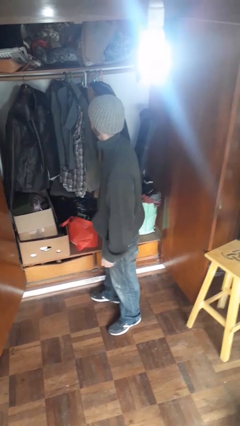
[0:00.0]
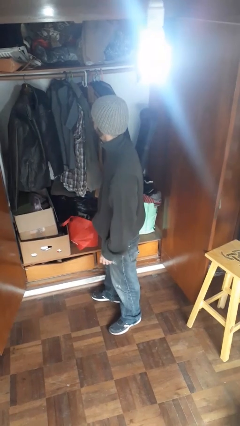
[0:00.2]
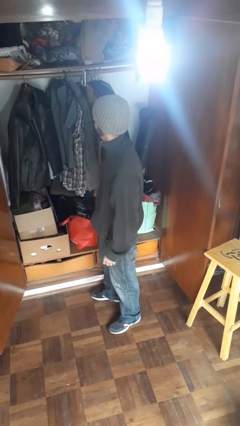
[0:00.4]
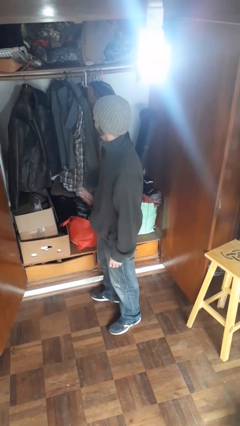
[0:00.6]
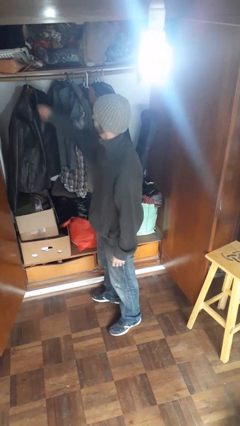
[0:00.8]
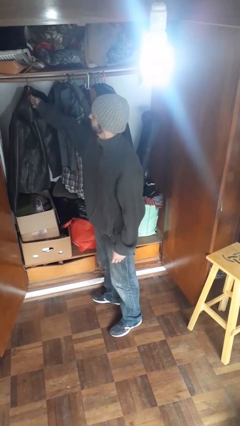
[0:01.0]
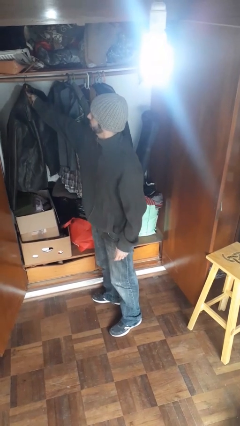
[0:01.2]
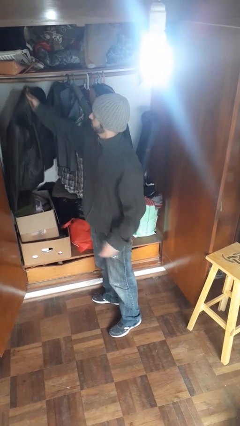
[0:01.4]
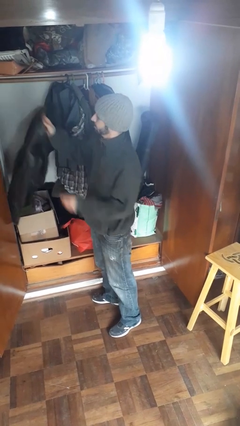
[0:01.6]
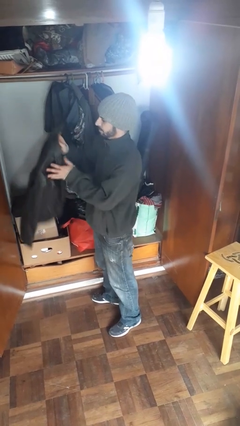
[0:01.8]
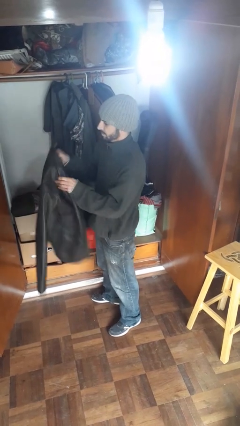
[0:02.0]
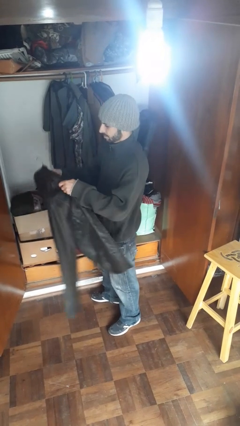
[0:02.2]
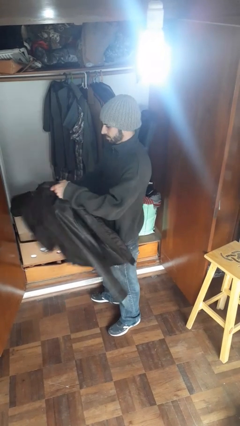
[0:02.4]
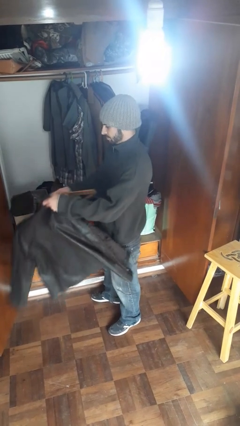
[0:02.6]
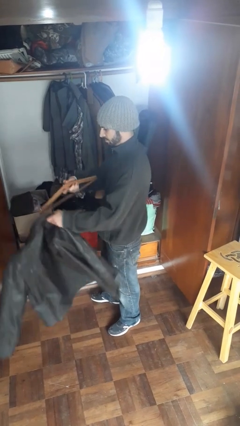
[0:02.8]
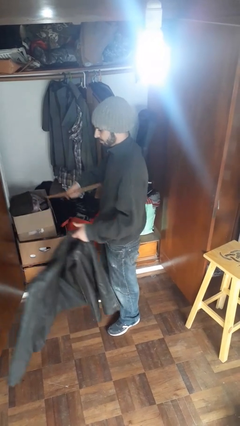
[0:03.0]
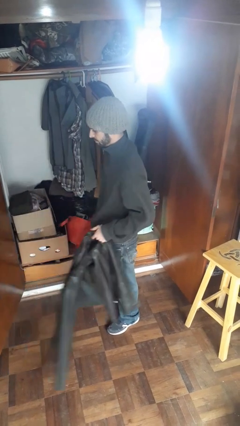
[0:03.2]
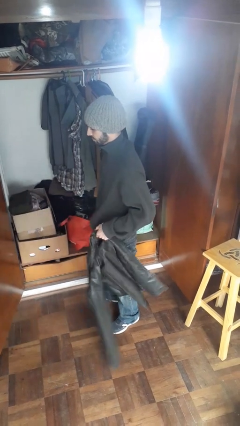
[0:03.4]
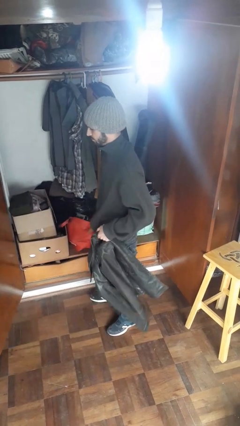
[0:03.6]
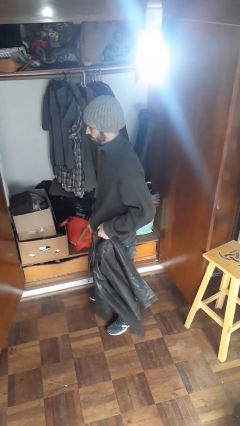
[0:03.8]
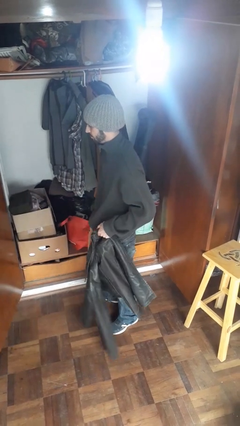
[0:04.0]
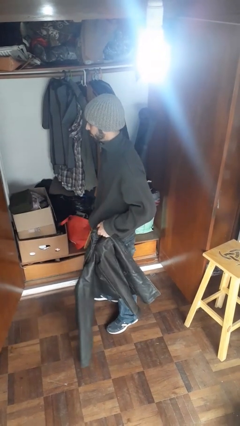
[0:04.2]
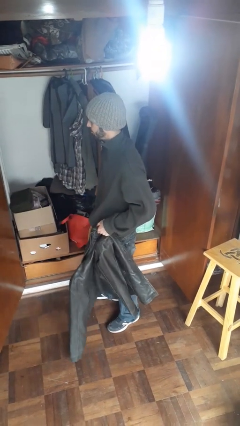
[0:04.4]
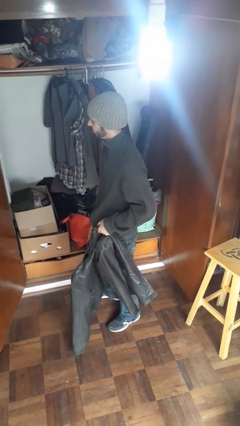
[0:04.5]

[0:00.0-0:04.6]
person takes clothes from closet

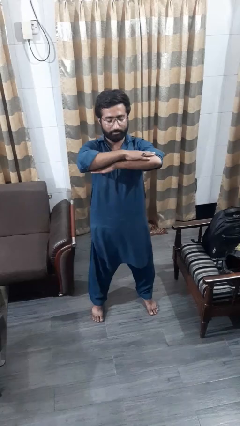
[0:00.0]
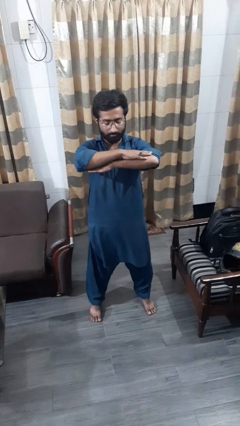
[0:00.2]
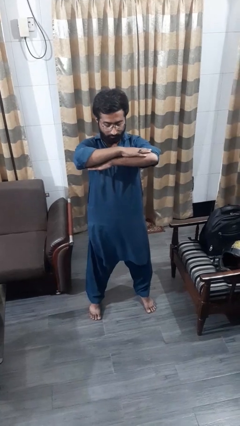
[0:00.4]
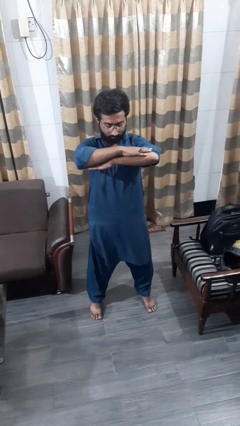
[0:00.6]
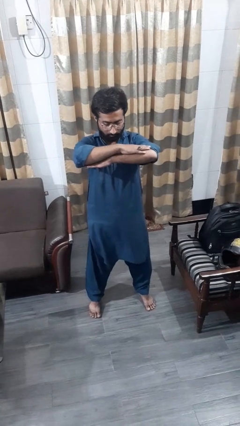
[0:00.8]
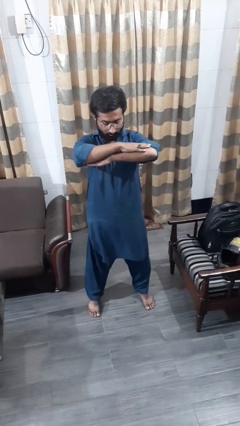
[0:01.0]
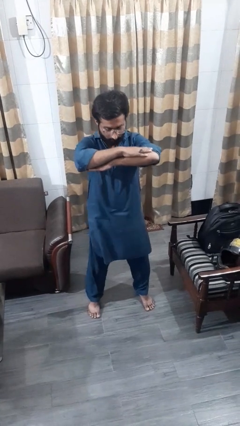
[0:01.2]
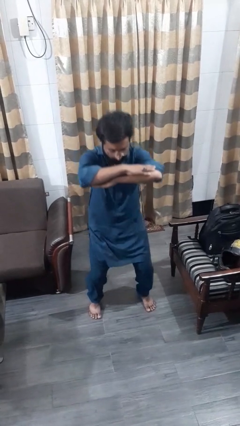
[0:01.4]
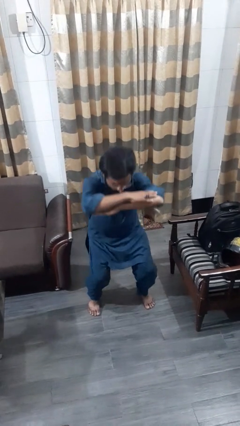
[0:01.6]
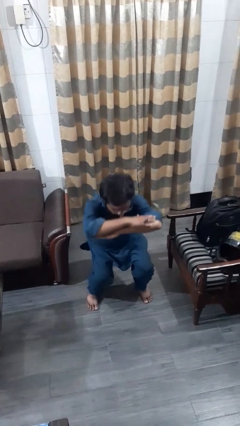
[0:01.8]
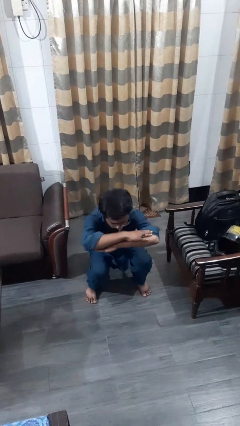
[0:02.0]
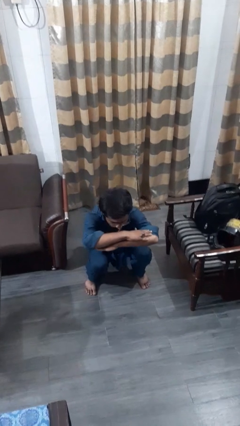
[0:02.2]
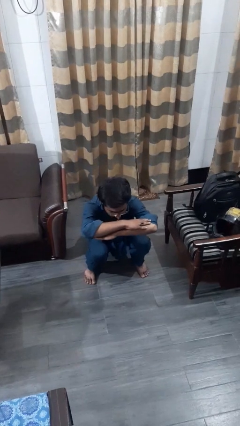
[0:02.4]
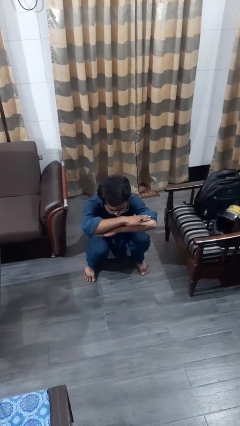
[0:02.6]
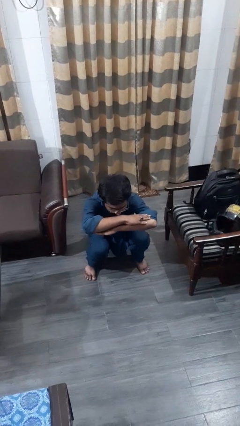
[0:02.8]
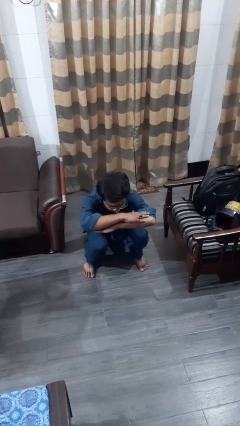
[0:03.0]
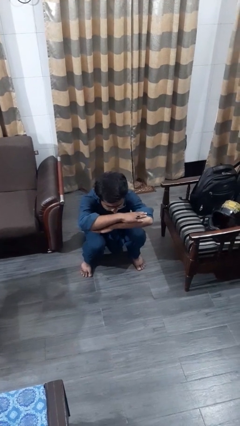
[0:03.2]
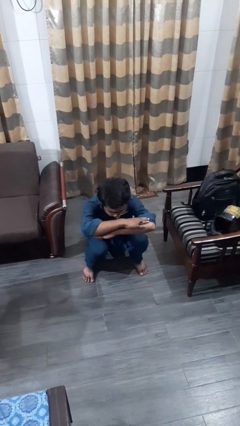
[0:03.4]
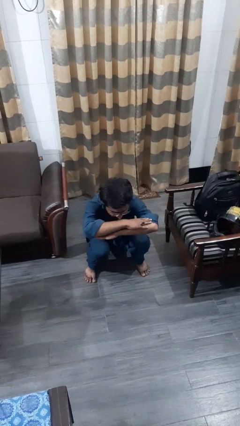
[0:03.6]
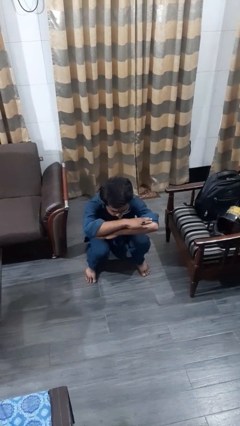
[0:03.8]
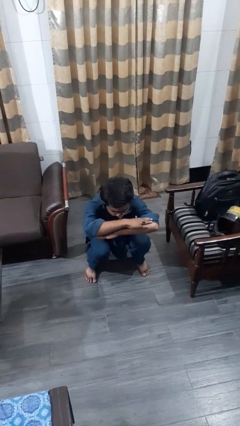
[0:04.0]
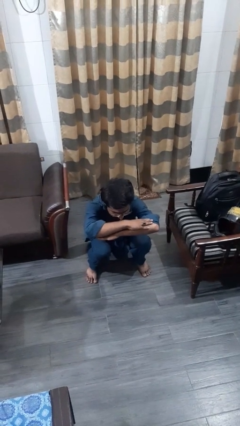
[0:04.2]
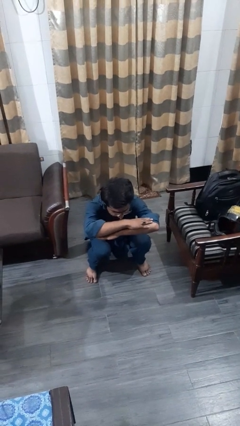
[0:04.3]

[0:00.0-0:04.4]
person squats

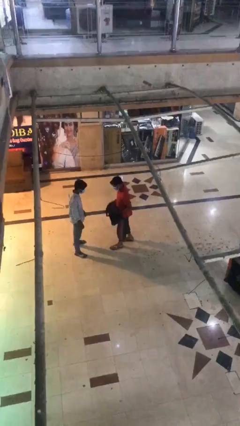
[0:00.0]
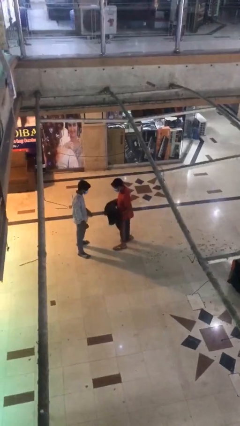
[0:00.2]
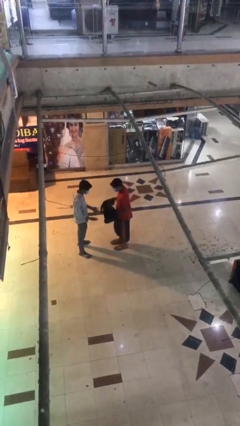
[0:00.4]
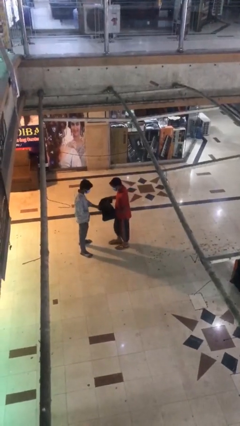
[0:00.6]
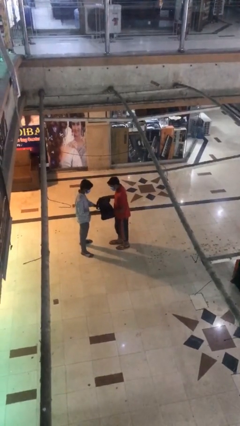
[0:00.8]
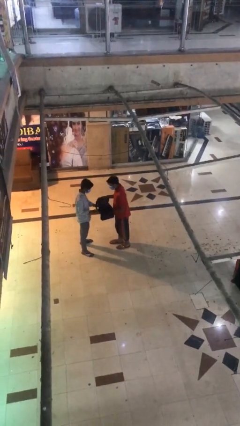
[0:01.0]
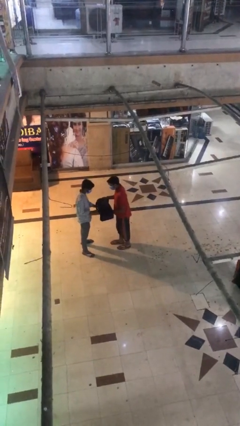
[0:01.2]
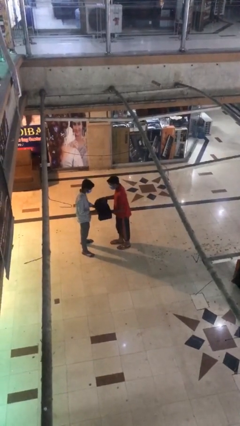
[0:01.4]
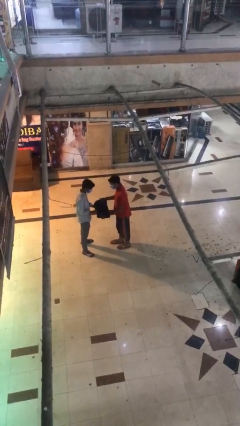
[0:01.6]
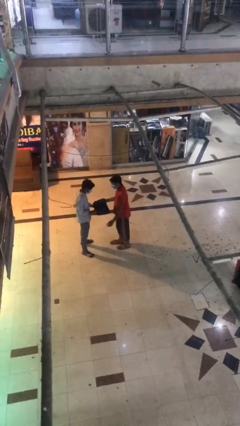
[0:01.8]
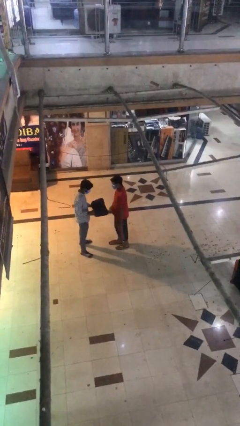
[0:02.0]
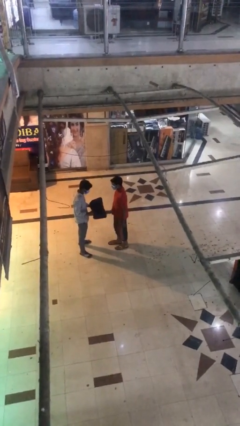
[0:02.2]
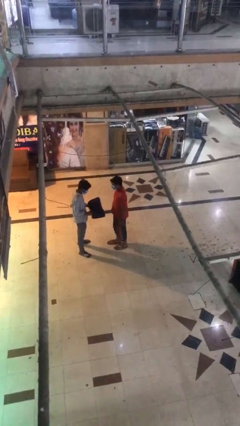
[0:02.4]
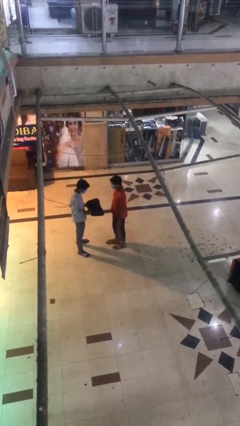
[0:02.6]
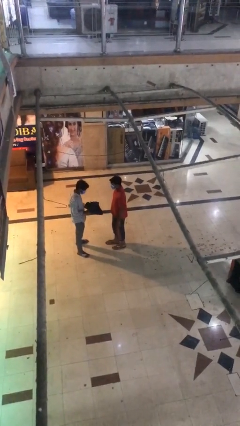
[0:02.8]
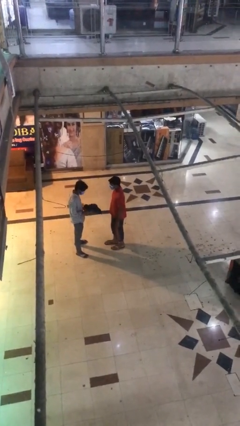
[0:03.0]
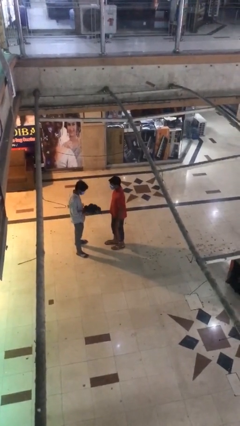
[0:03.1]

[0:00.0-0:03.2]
person transfers object to person

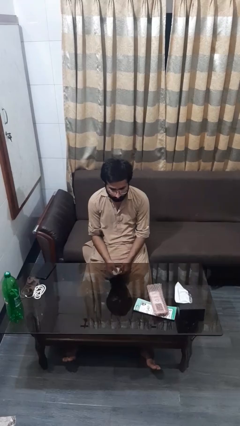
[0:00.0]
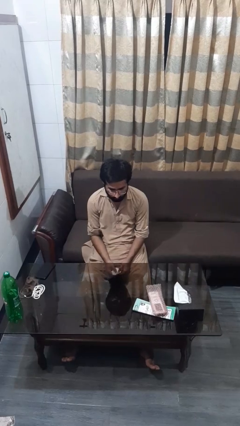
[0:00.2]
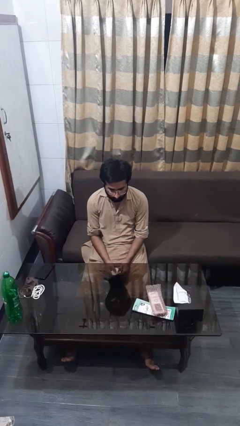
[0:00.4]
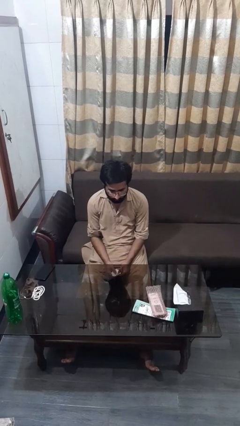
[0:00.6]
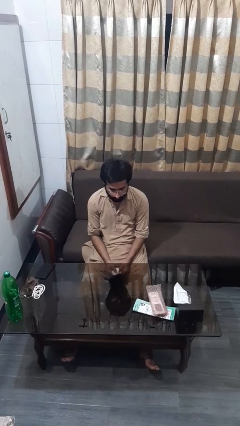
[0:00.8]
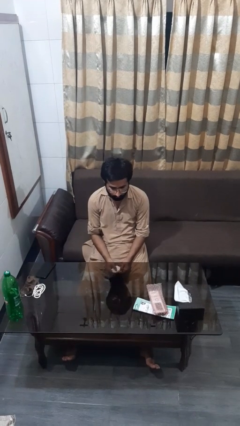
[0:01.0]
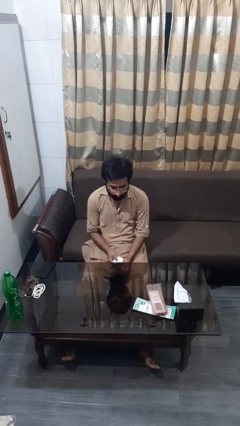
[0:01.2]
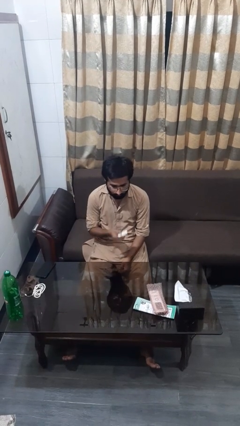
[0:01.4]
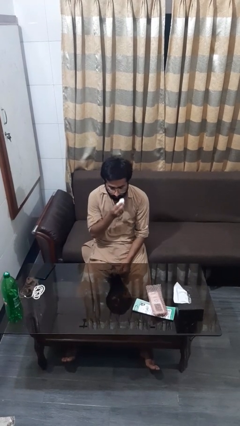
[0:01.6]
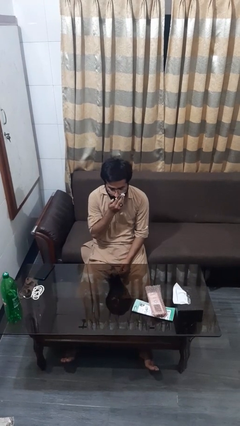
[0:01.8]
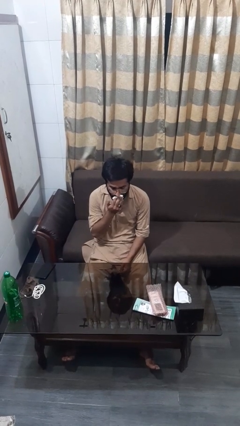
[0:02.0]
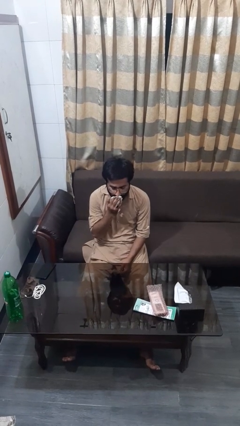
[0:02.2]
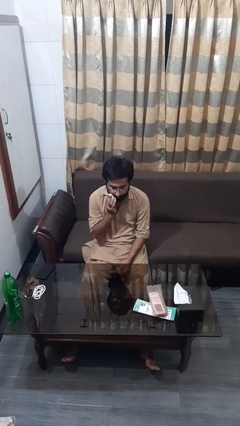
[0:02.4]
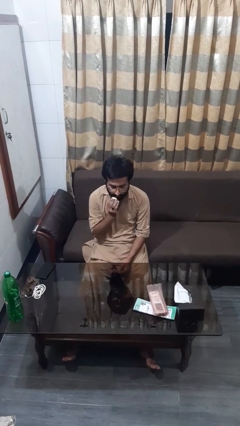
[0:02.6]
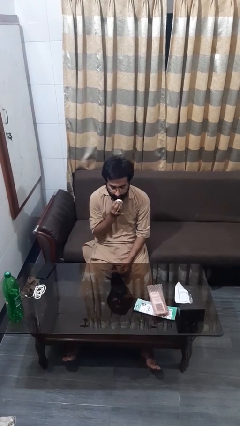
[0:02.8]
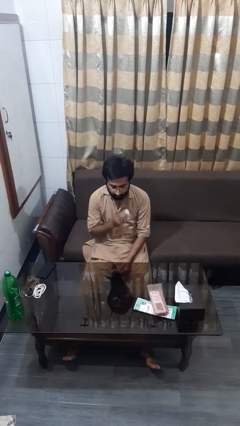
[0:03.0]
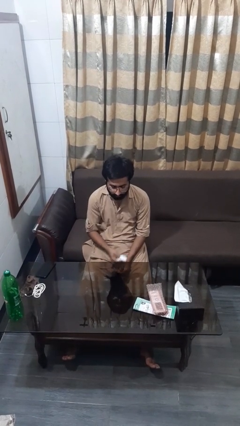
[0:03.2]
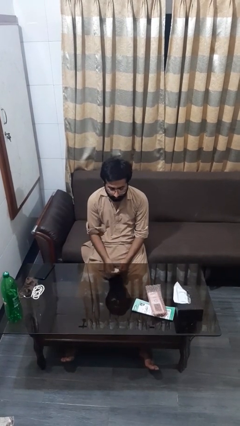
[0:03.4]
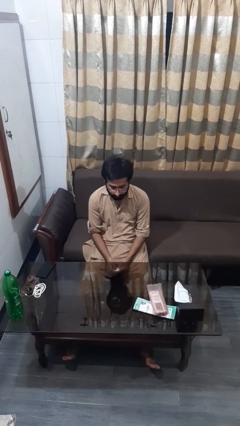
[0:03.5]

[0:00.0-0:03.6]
person wipes mouth with napkin

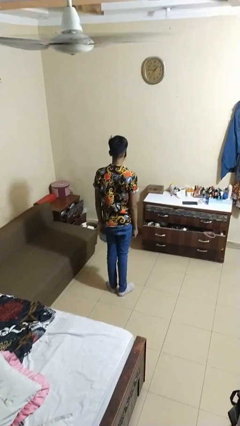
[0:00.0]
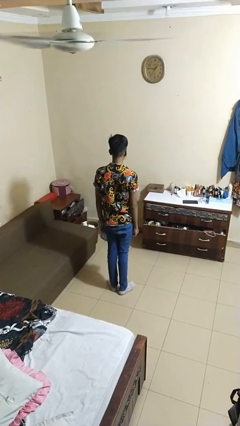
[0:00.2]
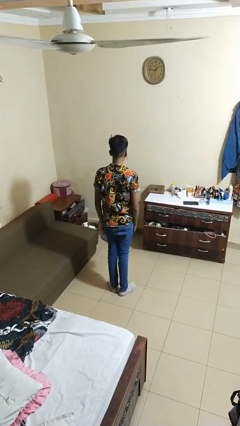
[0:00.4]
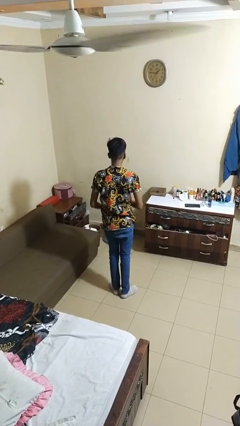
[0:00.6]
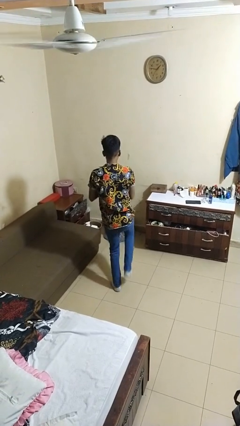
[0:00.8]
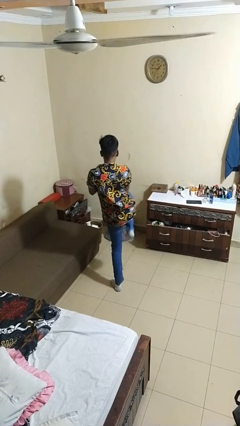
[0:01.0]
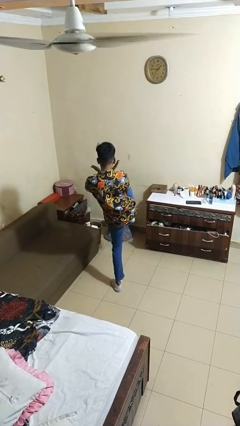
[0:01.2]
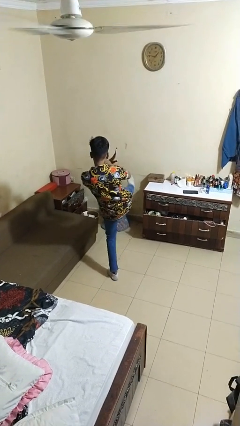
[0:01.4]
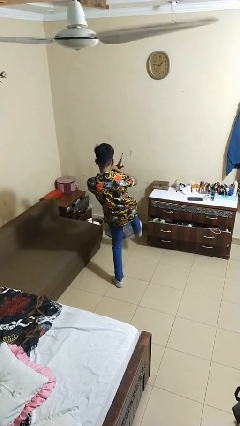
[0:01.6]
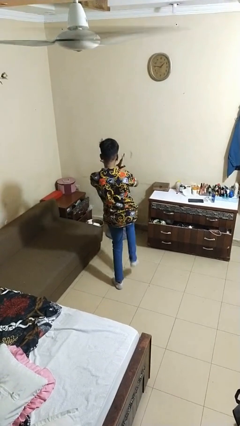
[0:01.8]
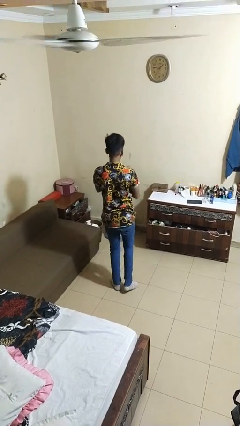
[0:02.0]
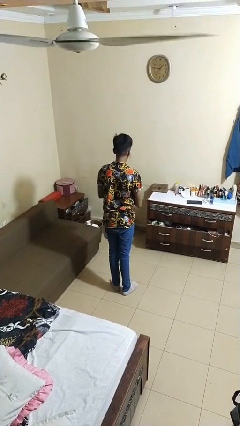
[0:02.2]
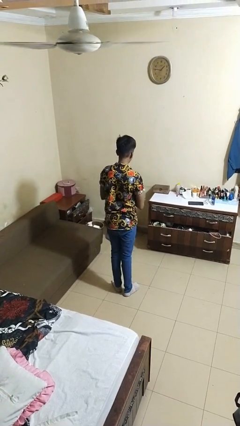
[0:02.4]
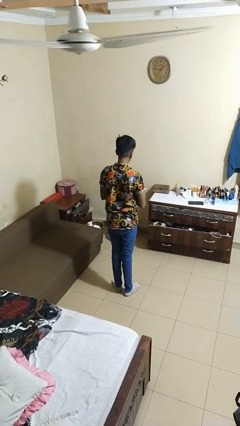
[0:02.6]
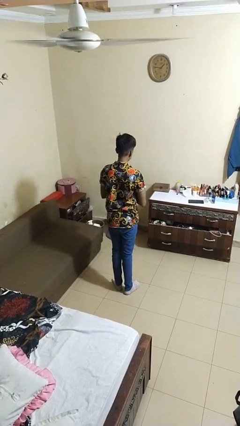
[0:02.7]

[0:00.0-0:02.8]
person karate kicks
